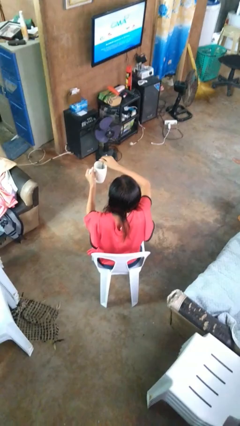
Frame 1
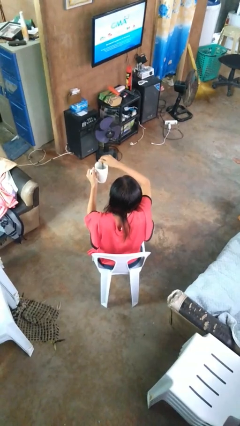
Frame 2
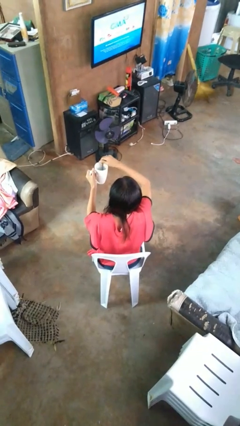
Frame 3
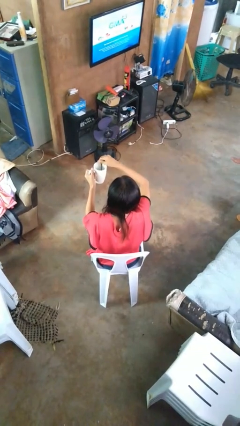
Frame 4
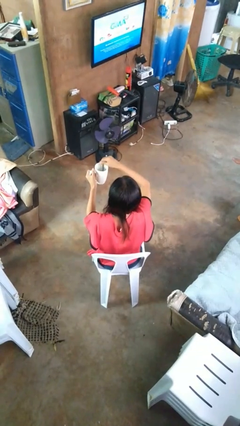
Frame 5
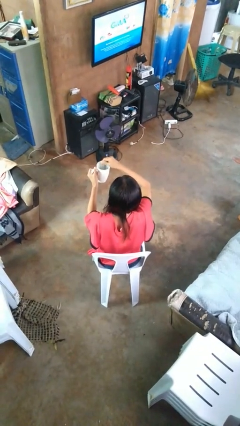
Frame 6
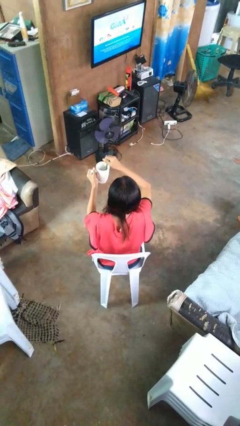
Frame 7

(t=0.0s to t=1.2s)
person stirs mug

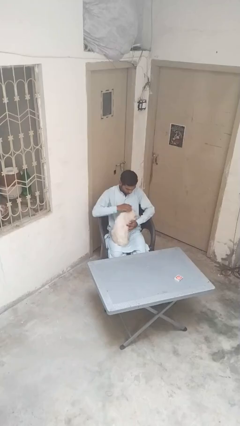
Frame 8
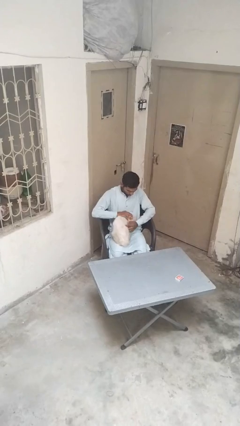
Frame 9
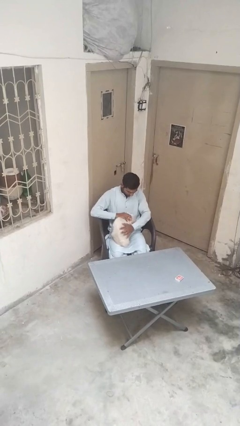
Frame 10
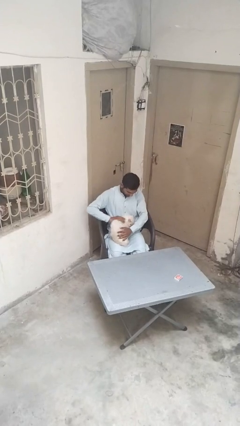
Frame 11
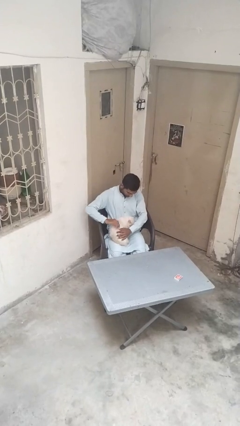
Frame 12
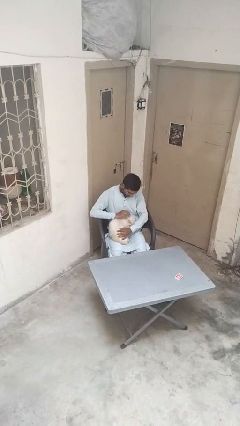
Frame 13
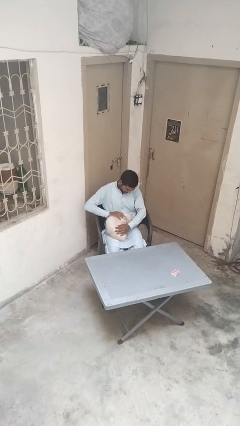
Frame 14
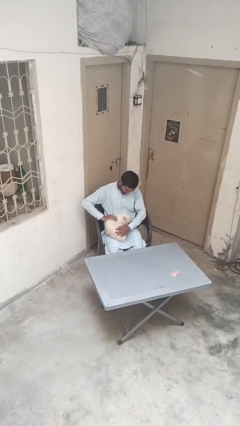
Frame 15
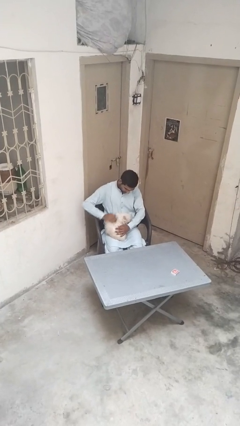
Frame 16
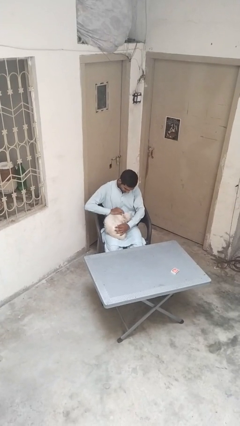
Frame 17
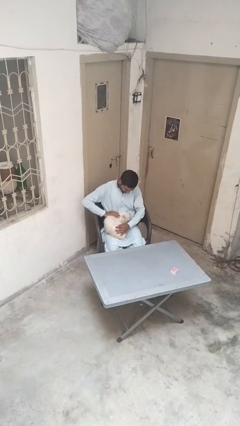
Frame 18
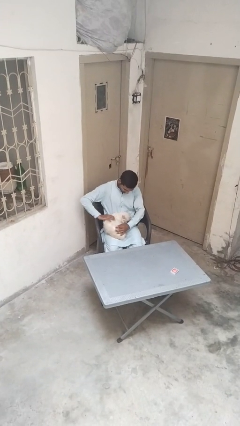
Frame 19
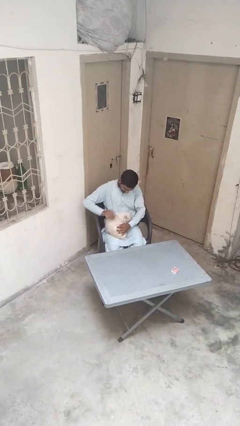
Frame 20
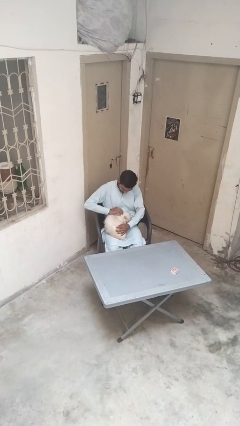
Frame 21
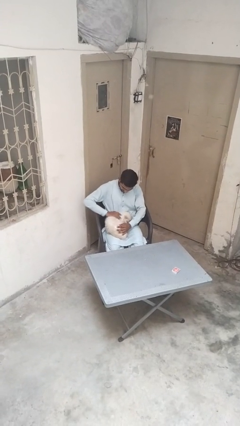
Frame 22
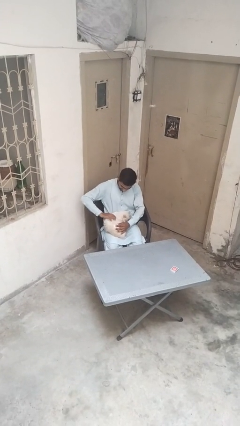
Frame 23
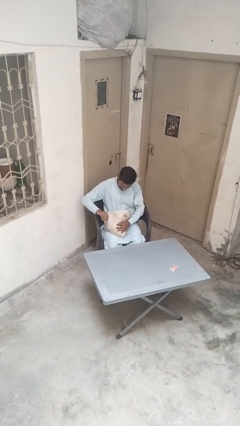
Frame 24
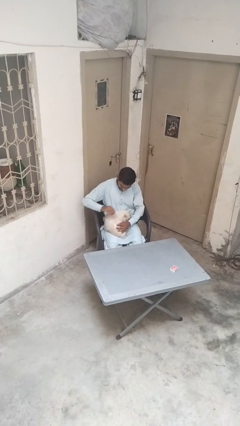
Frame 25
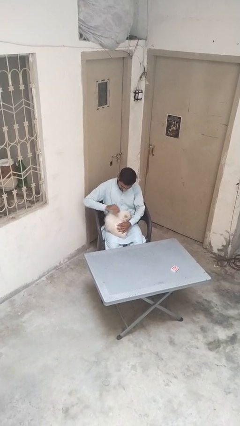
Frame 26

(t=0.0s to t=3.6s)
person pets cat

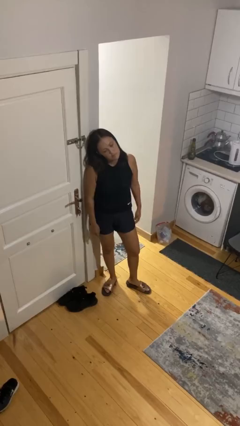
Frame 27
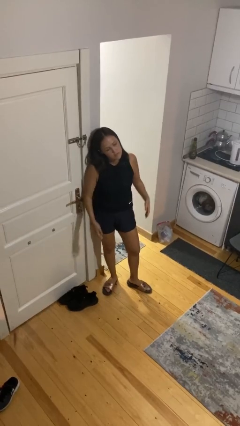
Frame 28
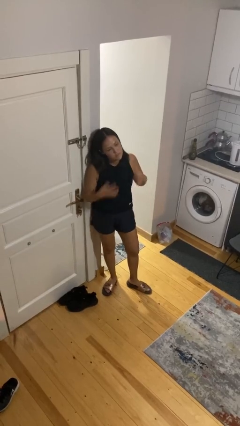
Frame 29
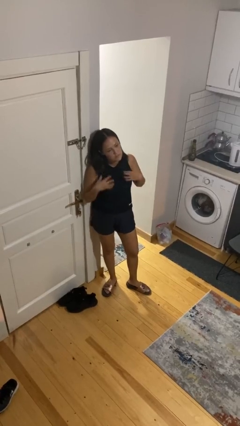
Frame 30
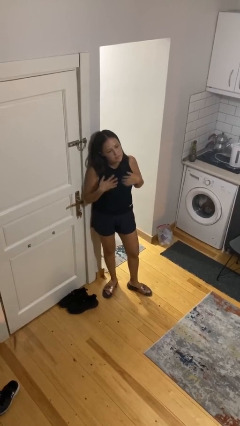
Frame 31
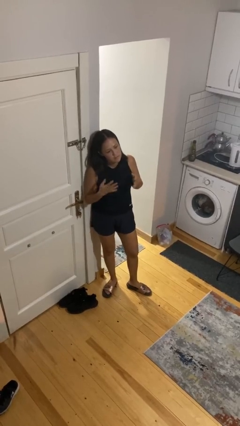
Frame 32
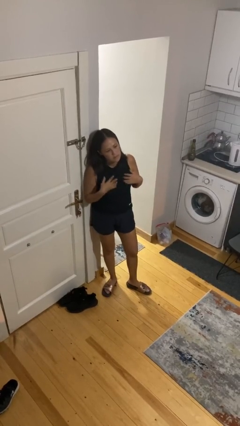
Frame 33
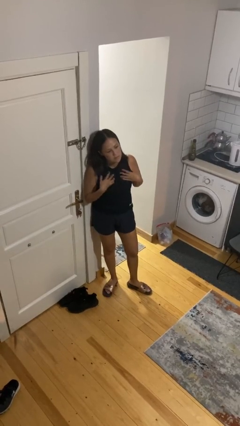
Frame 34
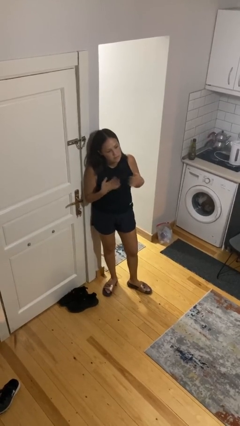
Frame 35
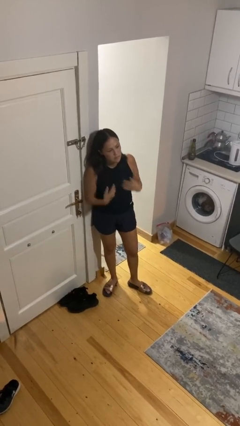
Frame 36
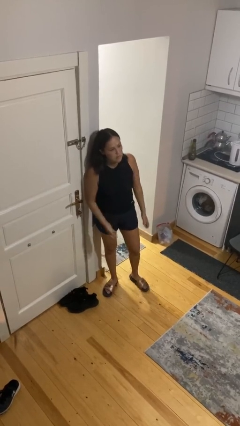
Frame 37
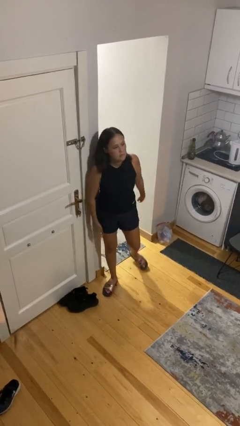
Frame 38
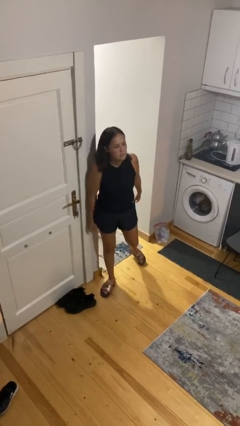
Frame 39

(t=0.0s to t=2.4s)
person drums on chest

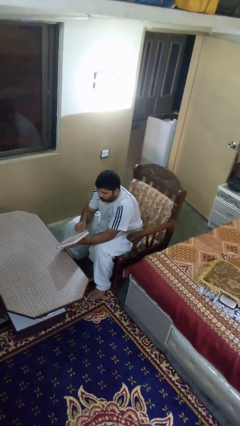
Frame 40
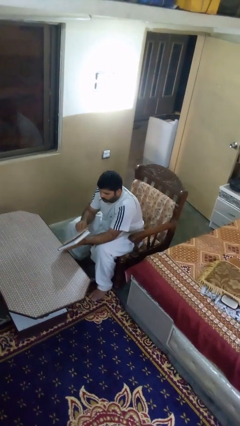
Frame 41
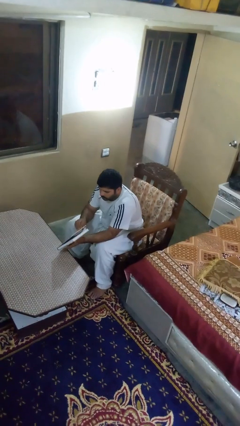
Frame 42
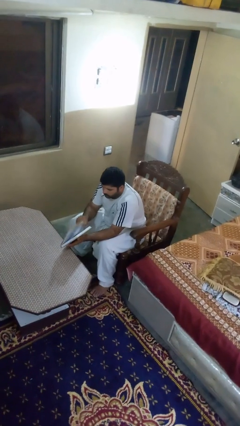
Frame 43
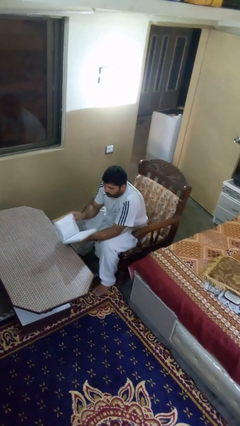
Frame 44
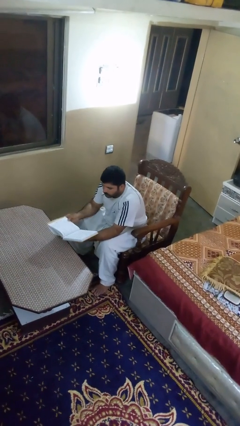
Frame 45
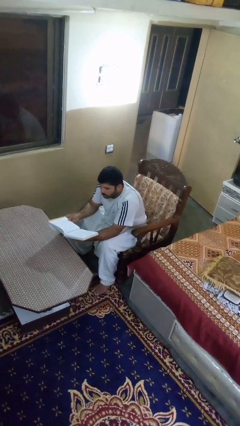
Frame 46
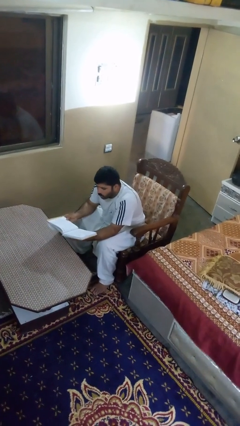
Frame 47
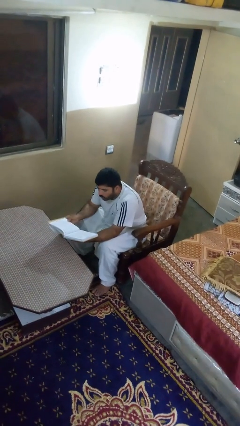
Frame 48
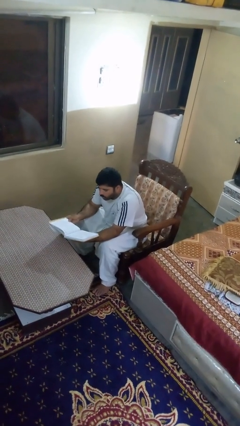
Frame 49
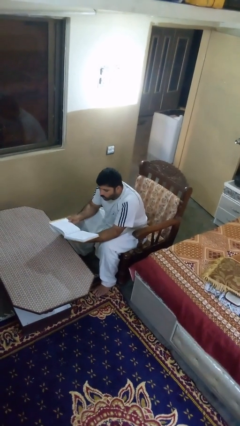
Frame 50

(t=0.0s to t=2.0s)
person reads book

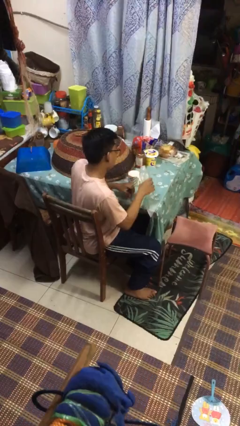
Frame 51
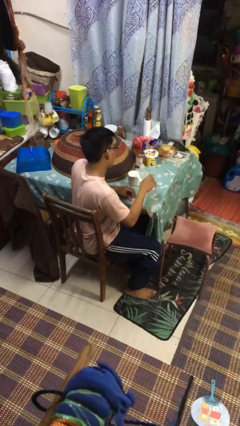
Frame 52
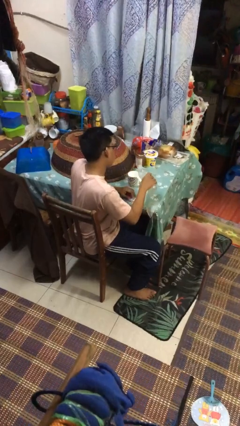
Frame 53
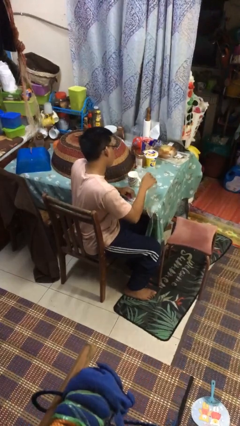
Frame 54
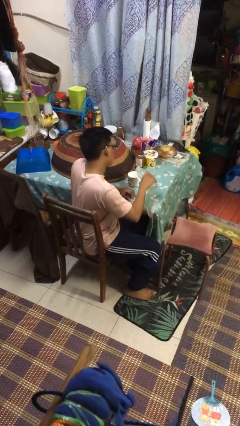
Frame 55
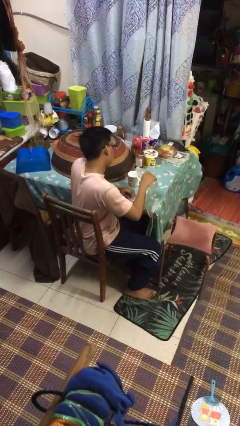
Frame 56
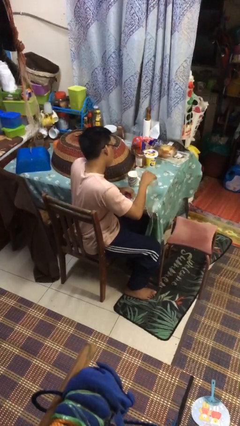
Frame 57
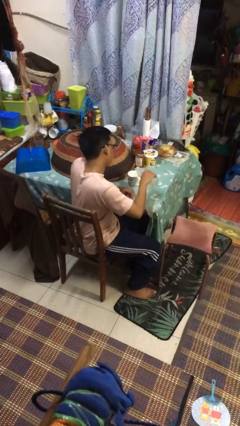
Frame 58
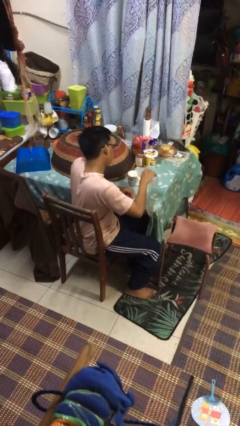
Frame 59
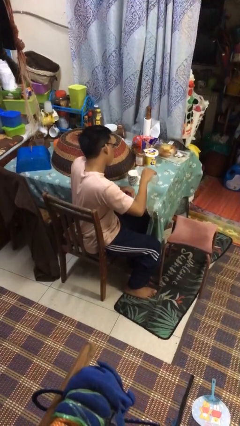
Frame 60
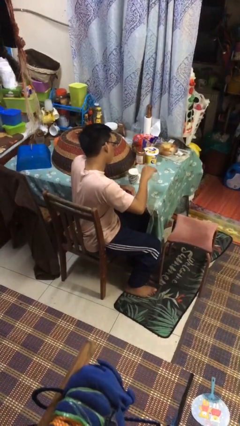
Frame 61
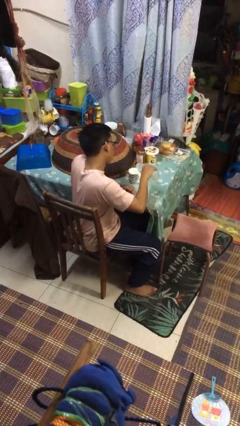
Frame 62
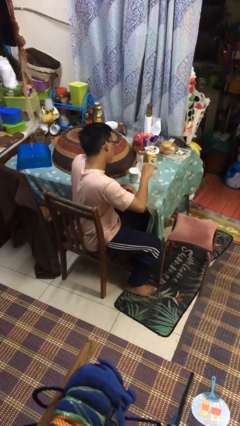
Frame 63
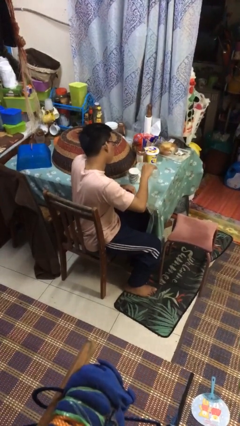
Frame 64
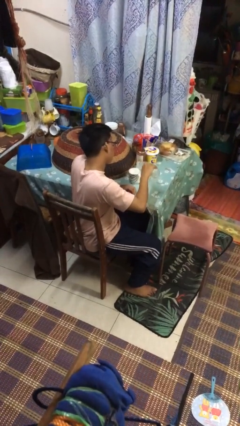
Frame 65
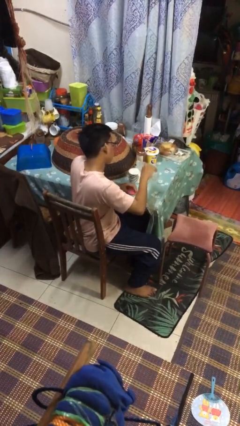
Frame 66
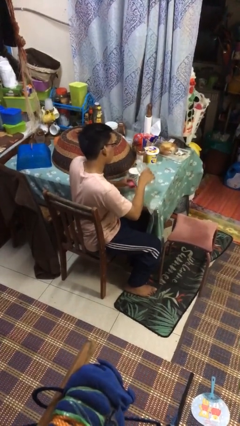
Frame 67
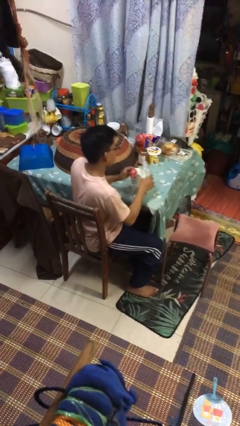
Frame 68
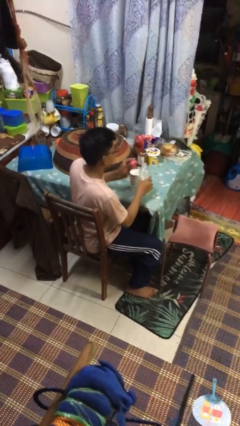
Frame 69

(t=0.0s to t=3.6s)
person pours liquid into cup

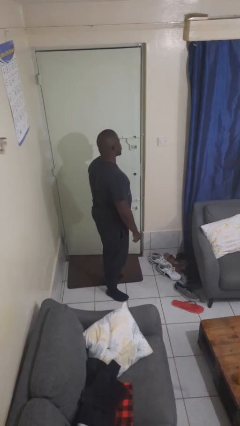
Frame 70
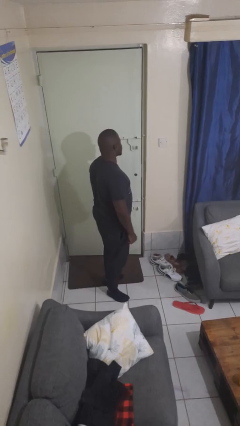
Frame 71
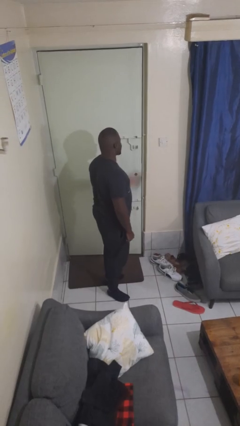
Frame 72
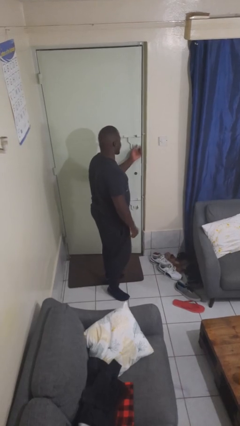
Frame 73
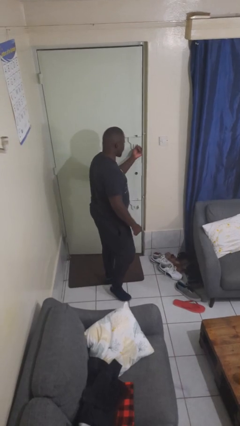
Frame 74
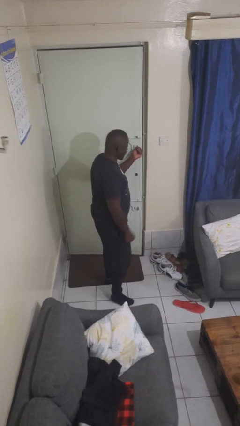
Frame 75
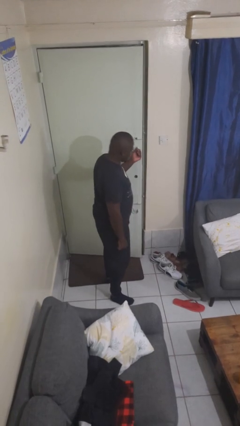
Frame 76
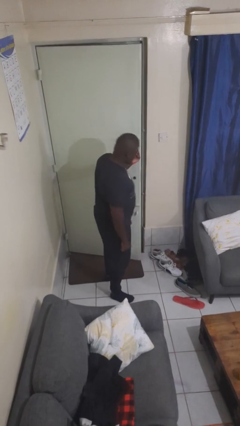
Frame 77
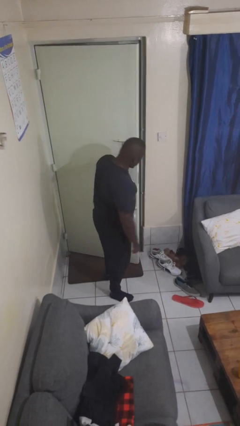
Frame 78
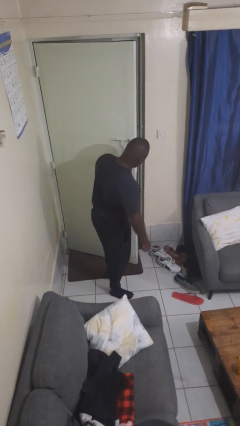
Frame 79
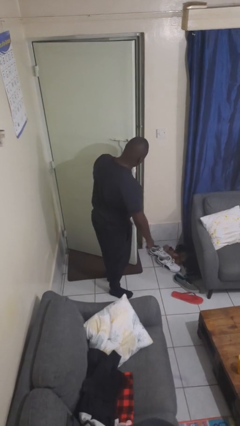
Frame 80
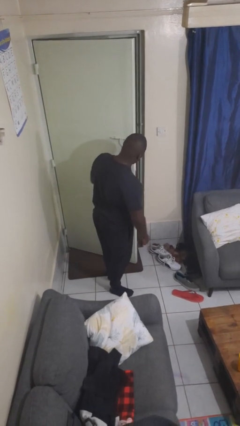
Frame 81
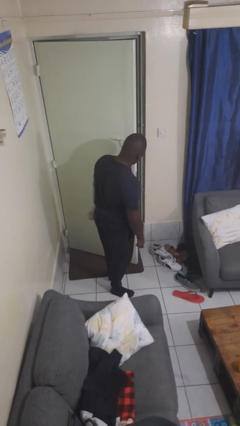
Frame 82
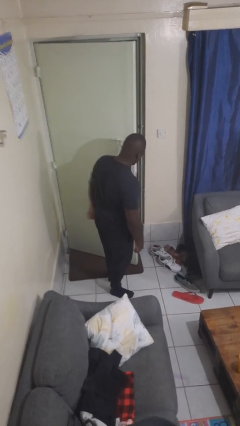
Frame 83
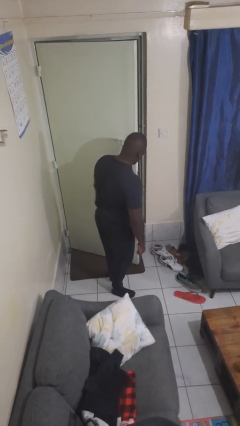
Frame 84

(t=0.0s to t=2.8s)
person opens facility door

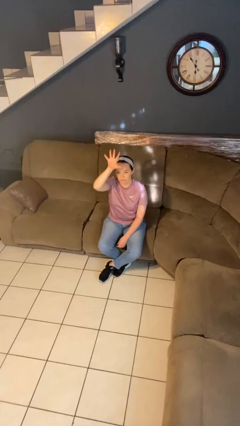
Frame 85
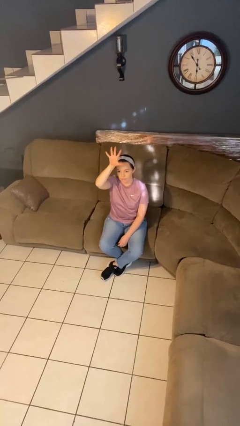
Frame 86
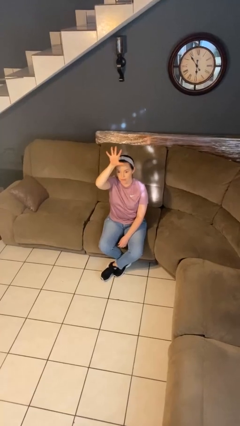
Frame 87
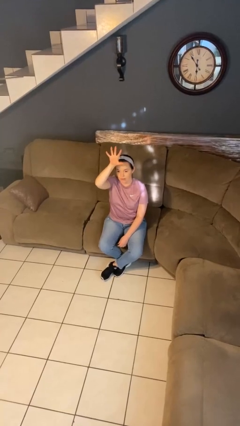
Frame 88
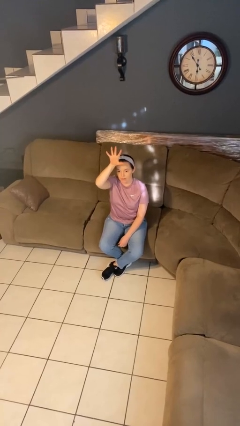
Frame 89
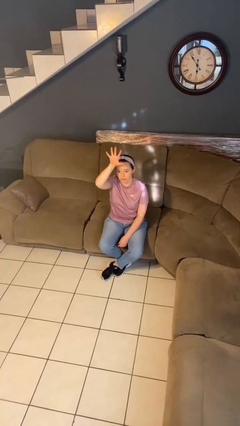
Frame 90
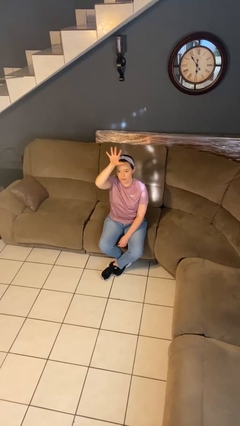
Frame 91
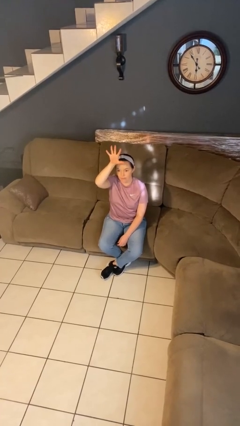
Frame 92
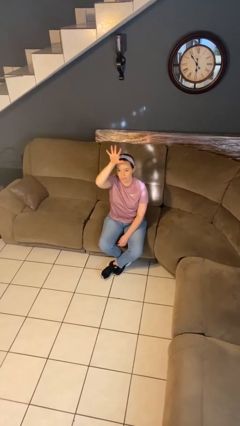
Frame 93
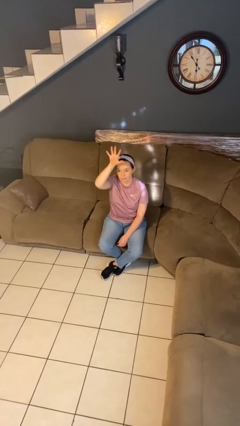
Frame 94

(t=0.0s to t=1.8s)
person gestures number five
